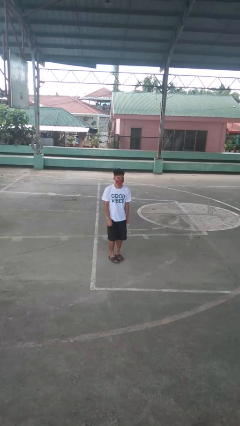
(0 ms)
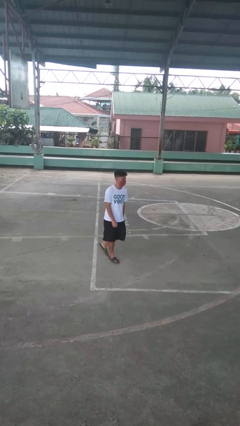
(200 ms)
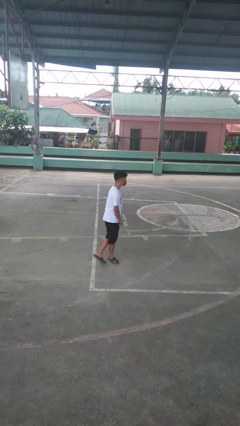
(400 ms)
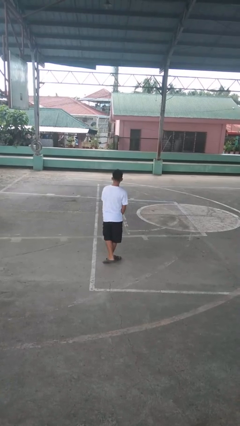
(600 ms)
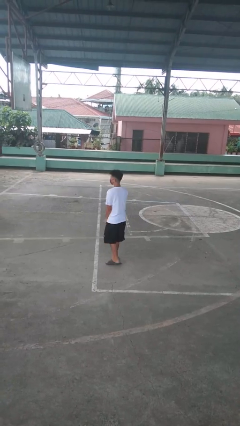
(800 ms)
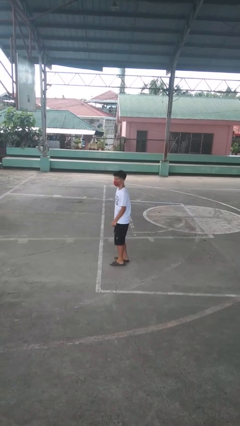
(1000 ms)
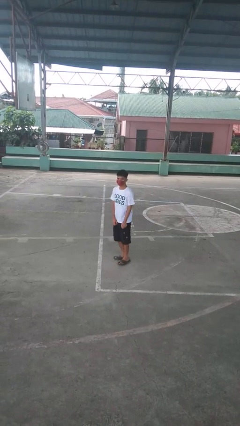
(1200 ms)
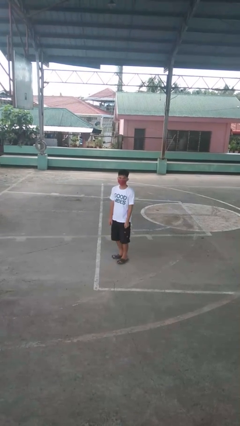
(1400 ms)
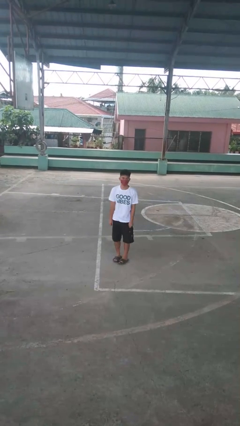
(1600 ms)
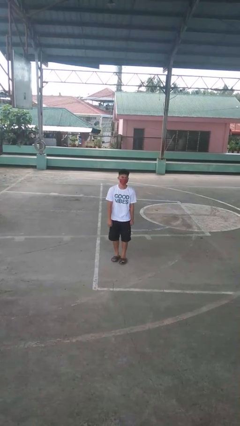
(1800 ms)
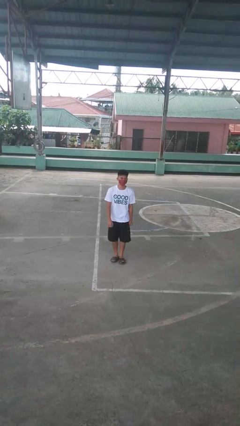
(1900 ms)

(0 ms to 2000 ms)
person twirls

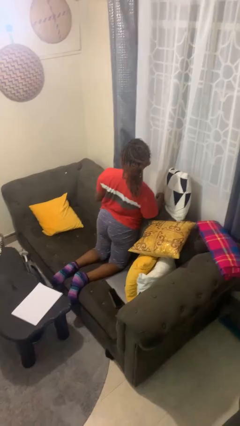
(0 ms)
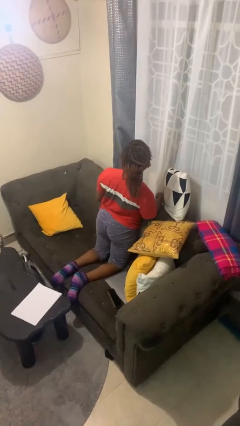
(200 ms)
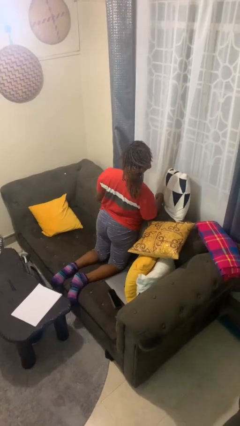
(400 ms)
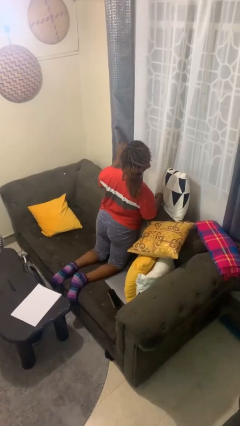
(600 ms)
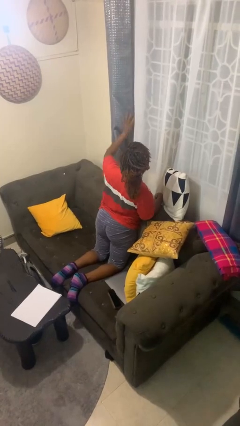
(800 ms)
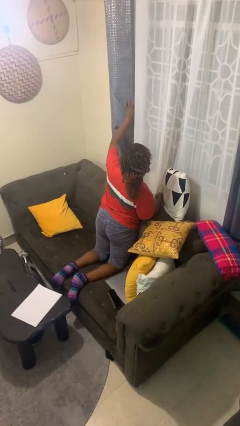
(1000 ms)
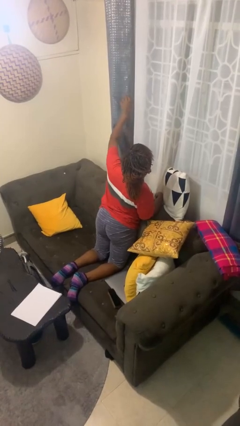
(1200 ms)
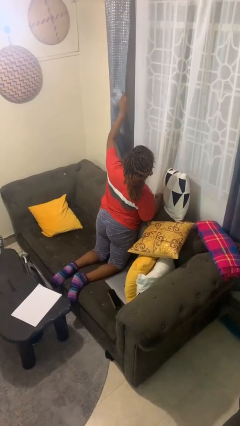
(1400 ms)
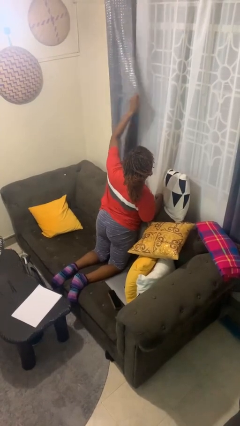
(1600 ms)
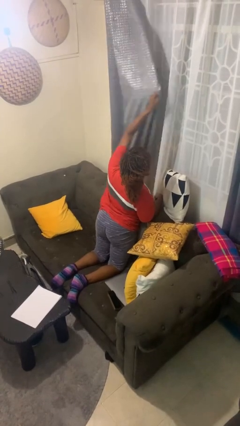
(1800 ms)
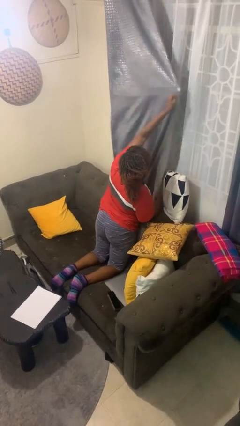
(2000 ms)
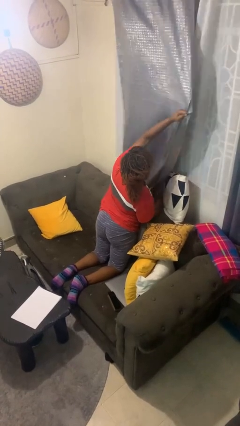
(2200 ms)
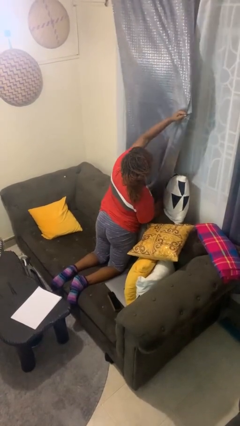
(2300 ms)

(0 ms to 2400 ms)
person closes curtains

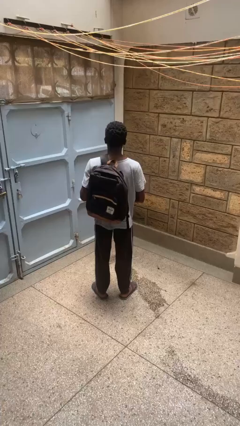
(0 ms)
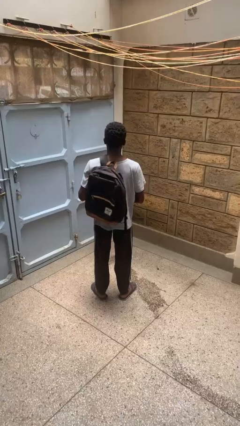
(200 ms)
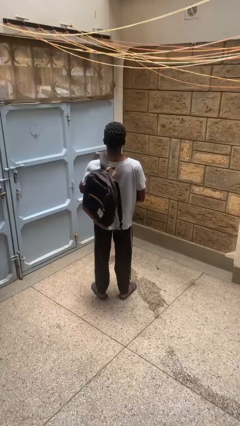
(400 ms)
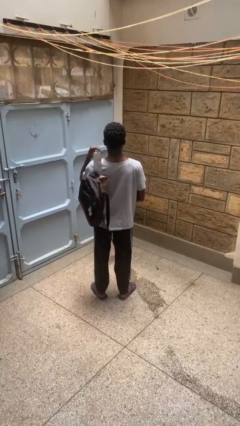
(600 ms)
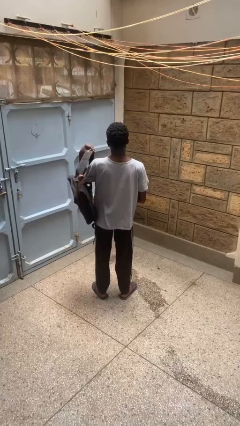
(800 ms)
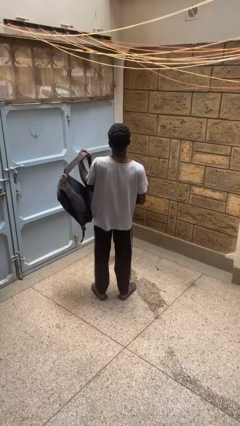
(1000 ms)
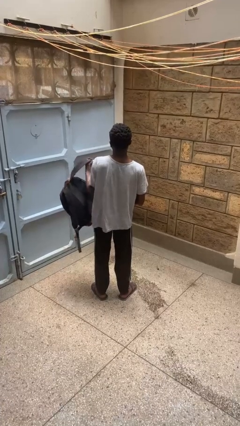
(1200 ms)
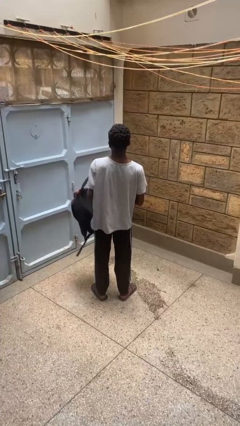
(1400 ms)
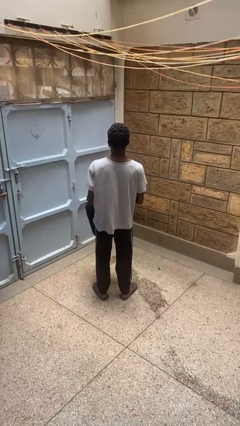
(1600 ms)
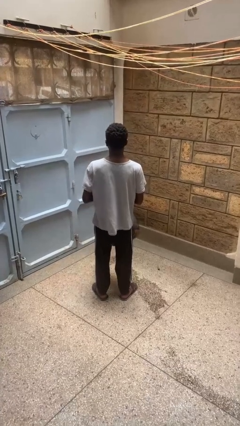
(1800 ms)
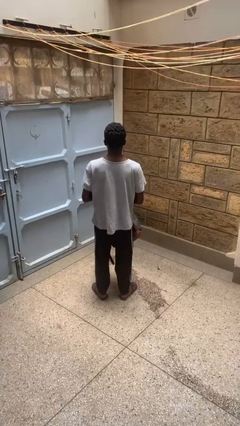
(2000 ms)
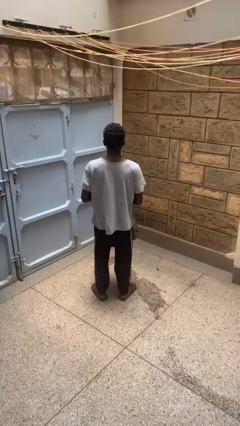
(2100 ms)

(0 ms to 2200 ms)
person takes off backpack

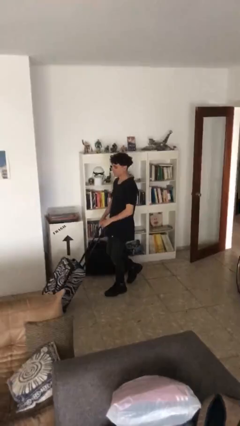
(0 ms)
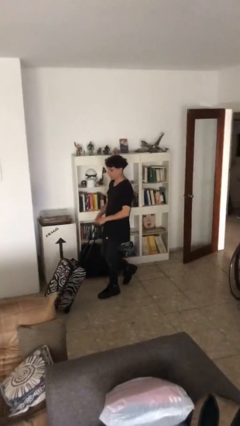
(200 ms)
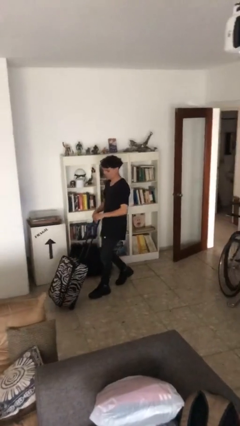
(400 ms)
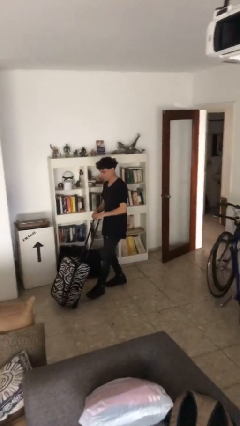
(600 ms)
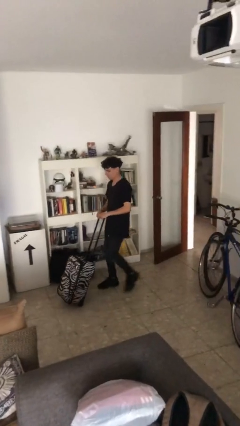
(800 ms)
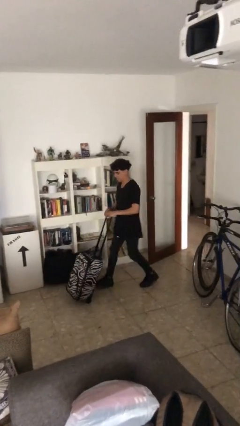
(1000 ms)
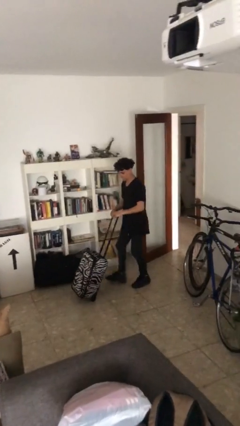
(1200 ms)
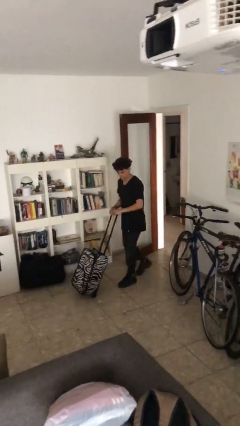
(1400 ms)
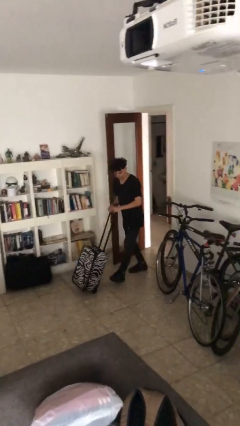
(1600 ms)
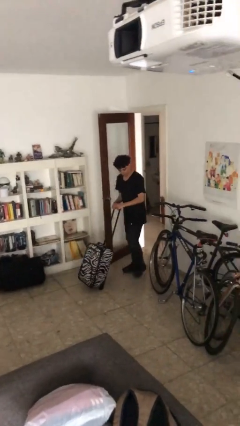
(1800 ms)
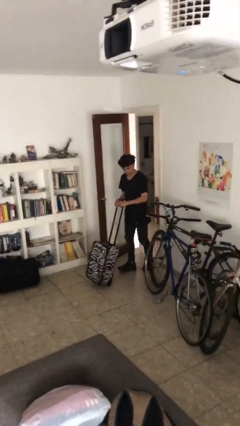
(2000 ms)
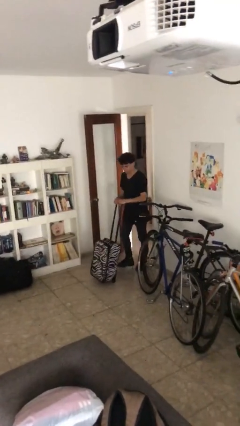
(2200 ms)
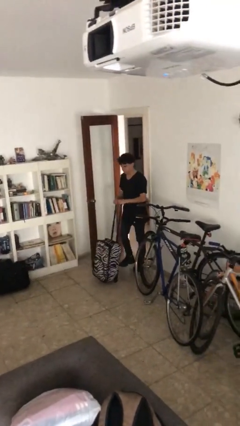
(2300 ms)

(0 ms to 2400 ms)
person pulls wheeled cart

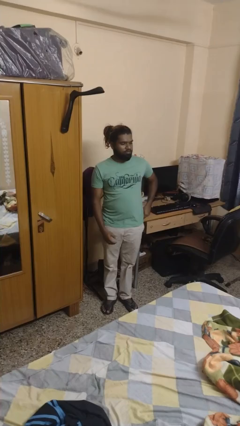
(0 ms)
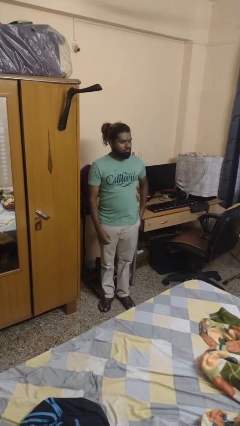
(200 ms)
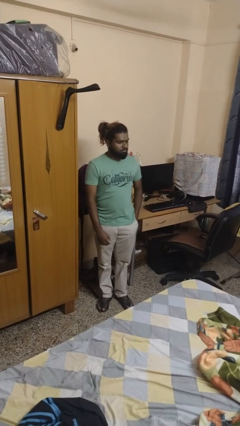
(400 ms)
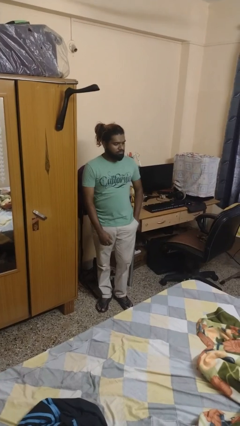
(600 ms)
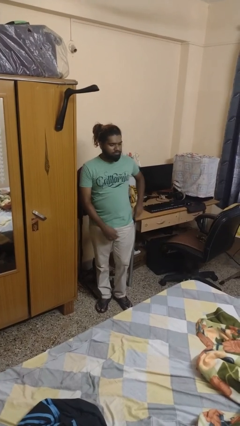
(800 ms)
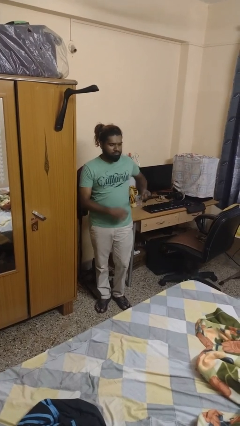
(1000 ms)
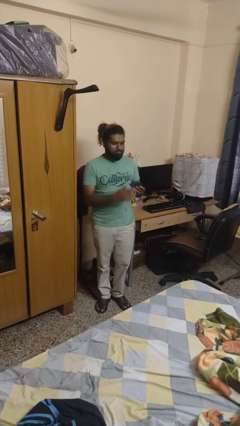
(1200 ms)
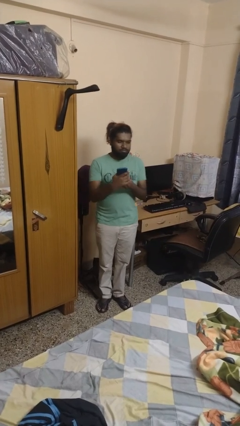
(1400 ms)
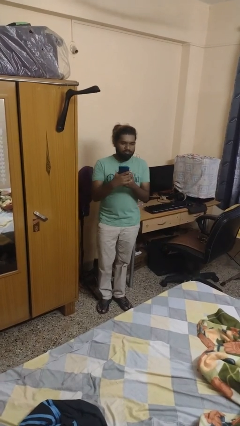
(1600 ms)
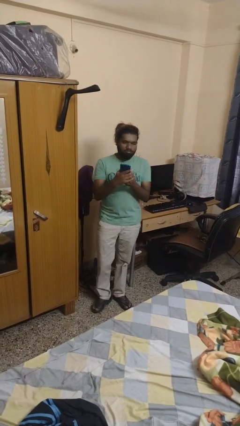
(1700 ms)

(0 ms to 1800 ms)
person takes phone from pocket

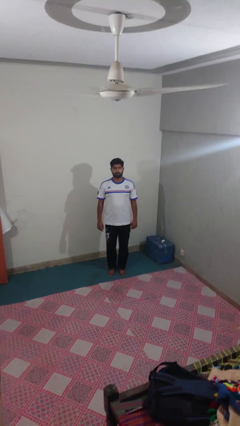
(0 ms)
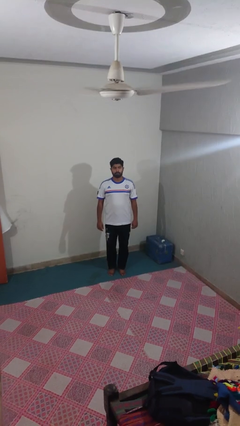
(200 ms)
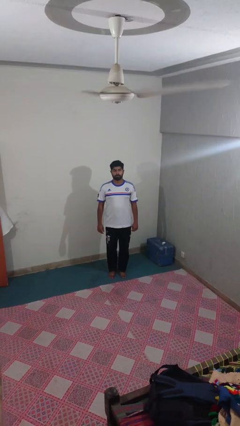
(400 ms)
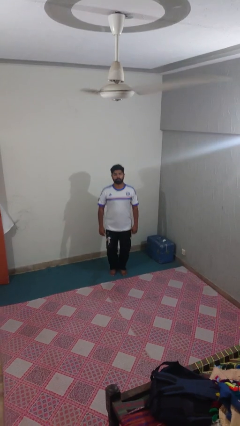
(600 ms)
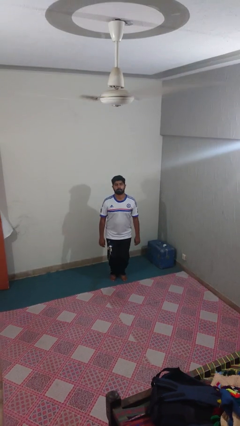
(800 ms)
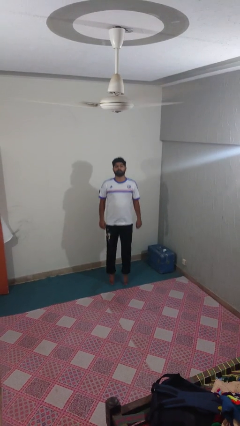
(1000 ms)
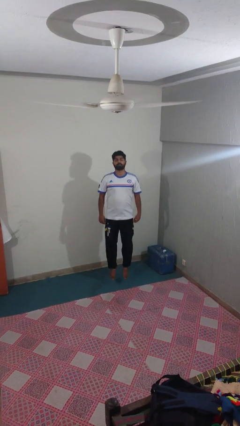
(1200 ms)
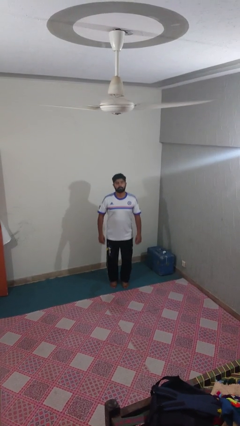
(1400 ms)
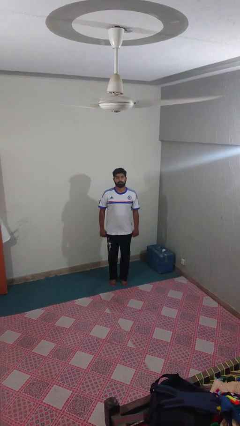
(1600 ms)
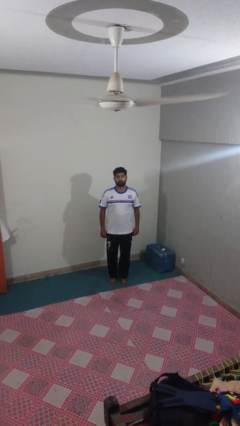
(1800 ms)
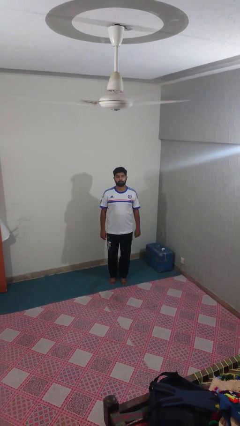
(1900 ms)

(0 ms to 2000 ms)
person jumps

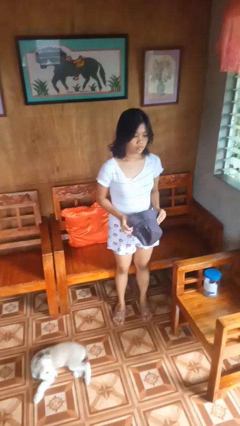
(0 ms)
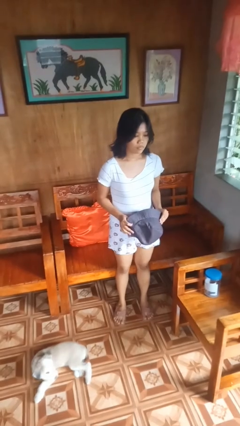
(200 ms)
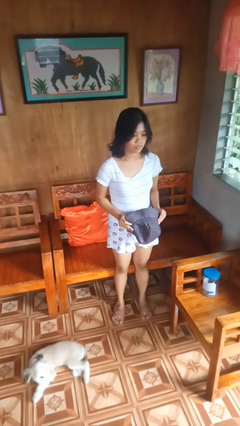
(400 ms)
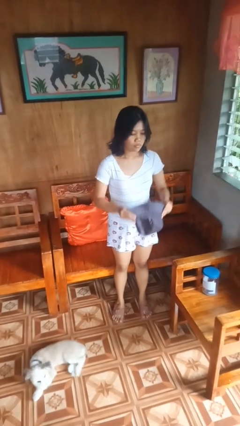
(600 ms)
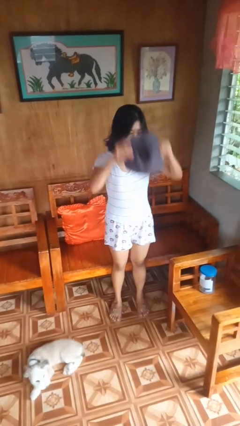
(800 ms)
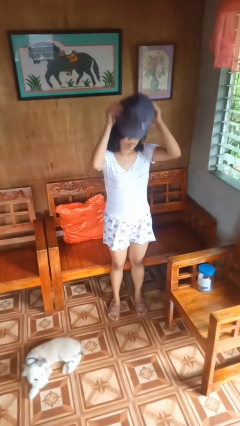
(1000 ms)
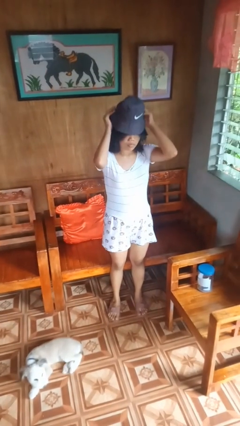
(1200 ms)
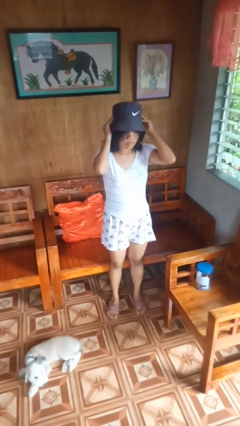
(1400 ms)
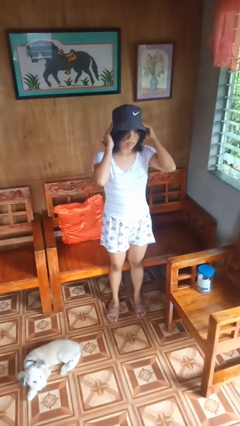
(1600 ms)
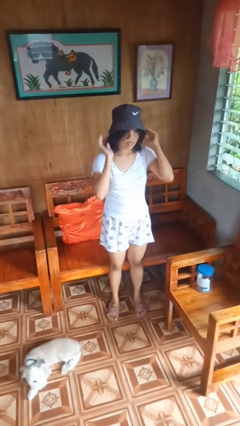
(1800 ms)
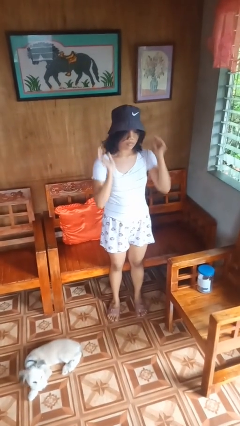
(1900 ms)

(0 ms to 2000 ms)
person puts on hat

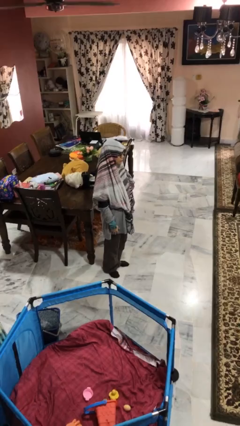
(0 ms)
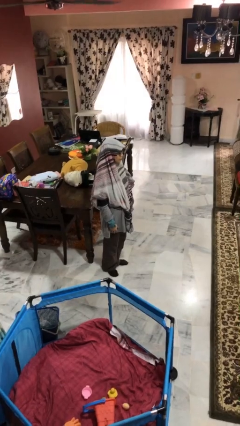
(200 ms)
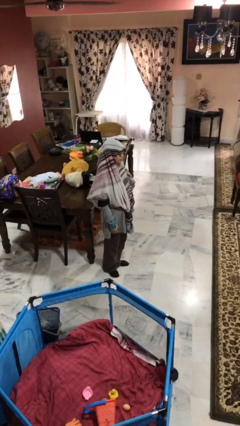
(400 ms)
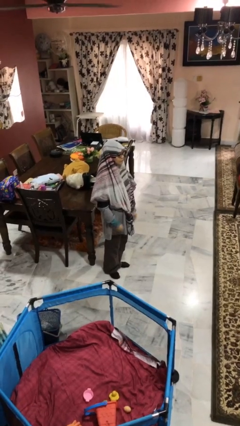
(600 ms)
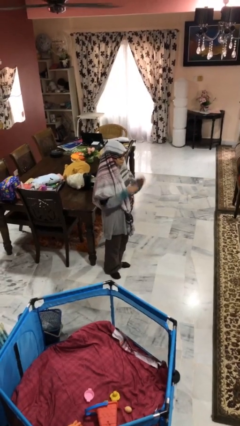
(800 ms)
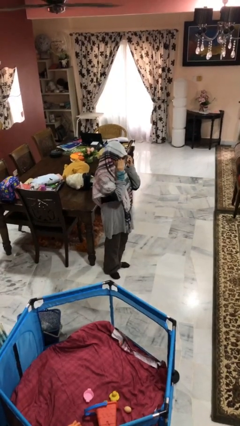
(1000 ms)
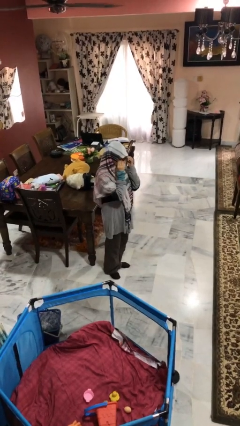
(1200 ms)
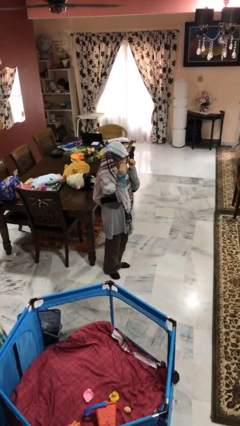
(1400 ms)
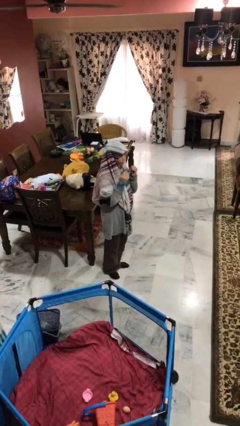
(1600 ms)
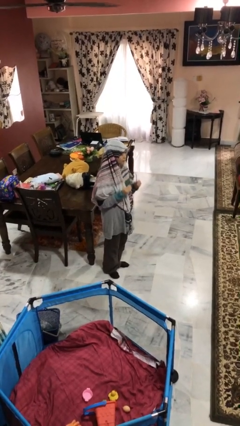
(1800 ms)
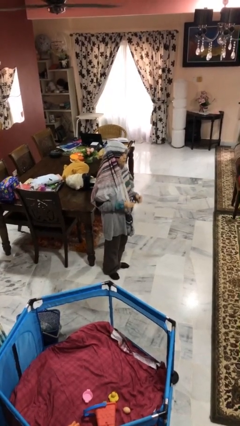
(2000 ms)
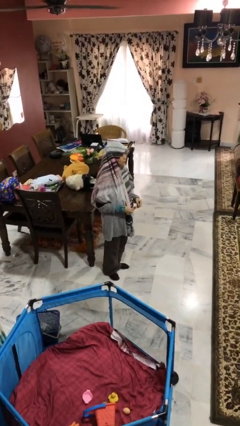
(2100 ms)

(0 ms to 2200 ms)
person takes off glasses
